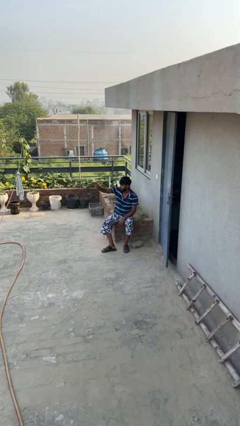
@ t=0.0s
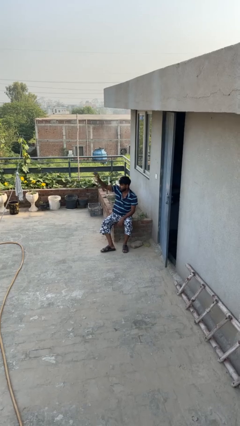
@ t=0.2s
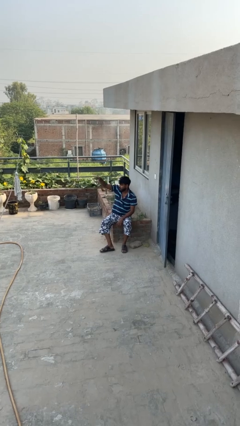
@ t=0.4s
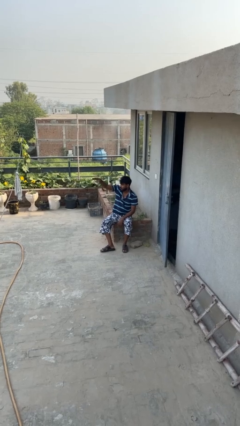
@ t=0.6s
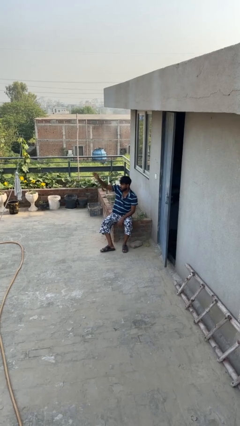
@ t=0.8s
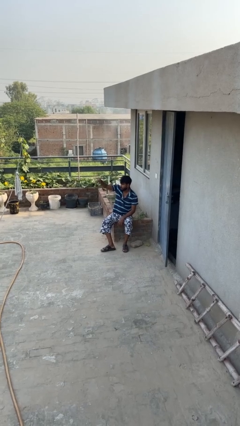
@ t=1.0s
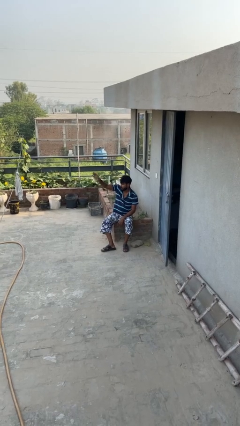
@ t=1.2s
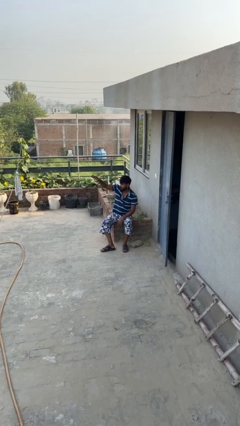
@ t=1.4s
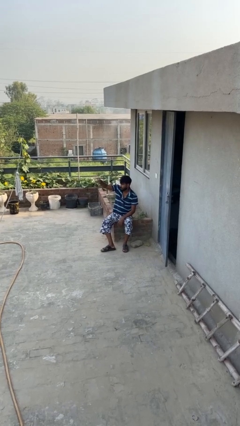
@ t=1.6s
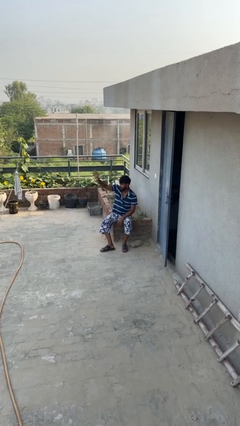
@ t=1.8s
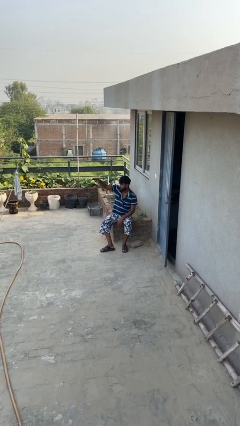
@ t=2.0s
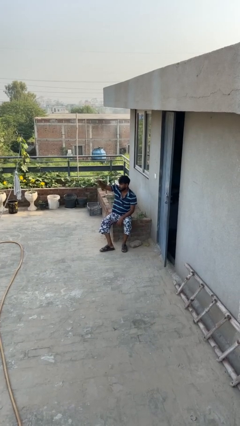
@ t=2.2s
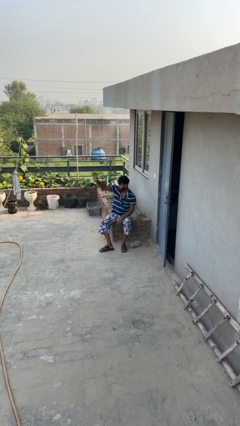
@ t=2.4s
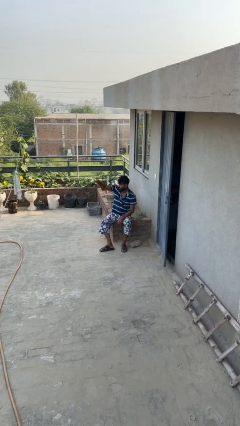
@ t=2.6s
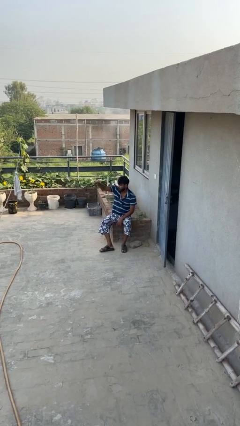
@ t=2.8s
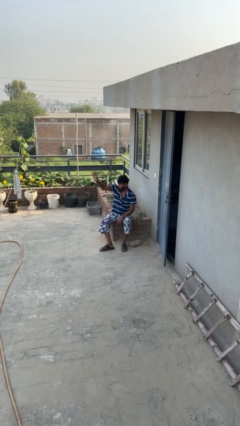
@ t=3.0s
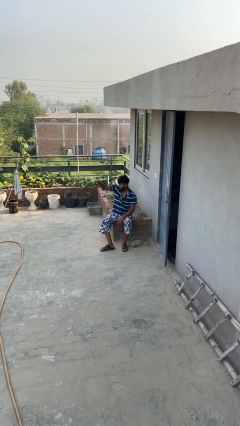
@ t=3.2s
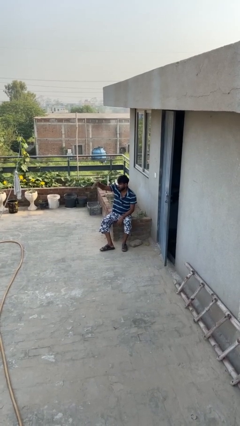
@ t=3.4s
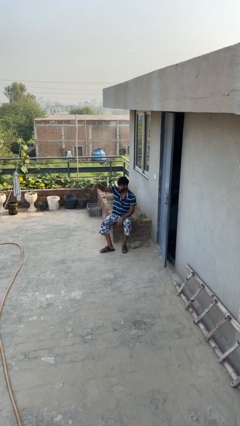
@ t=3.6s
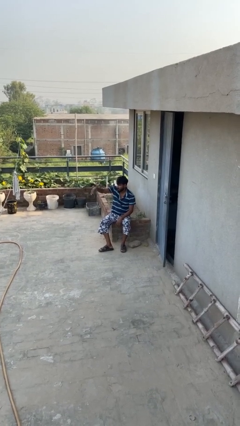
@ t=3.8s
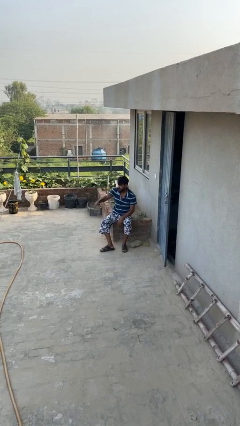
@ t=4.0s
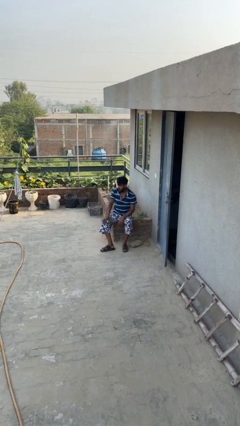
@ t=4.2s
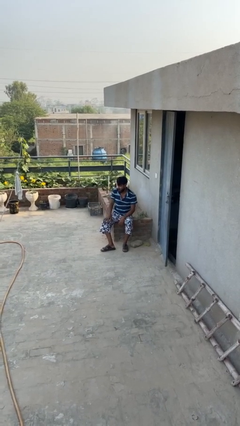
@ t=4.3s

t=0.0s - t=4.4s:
person gestures come here

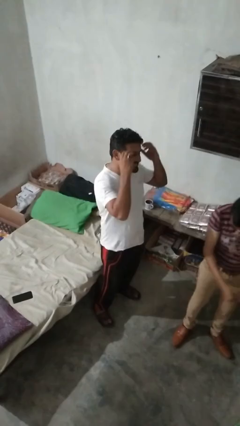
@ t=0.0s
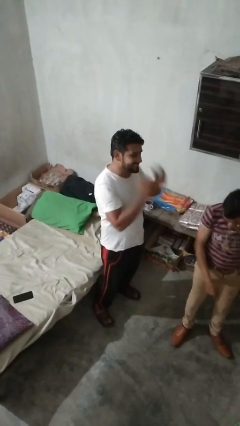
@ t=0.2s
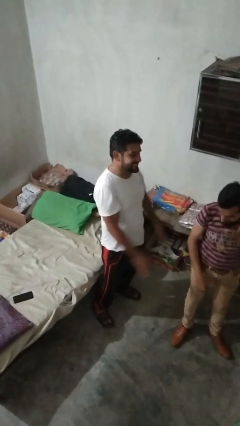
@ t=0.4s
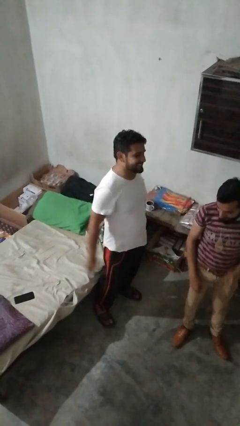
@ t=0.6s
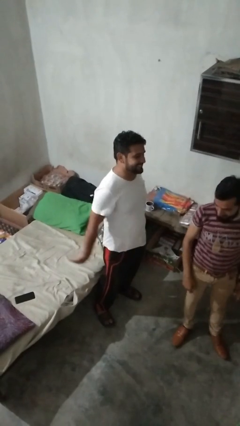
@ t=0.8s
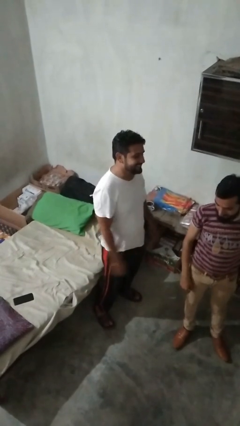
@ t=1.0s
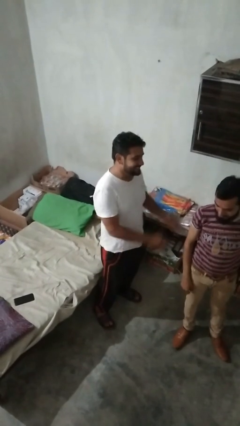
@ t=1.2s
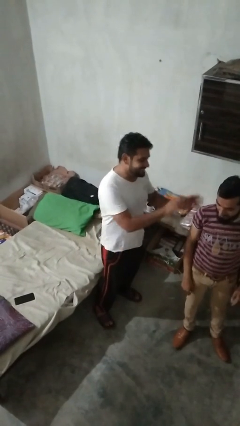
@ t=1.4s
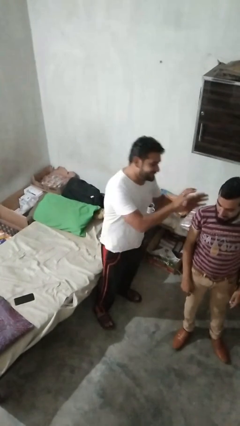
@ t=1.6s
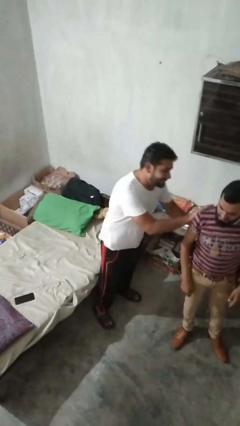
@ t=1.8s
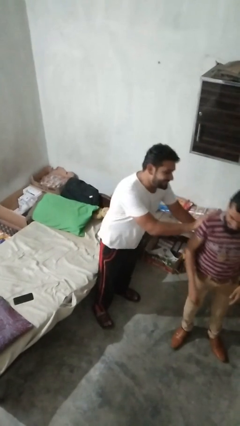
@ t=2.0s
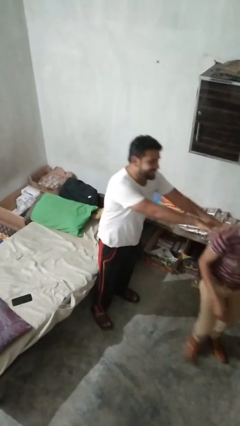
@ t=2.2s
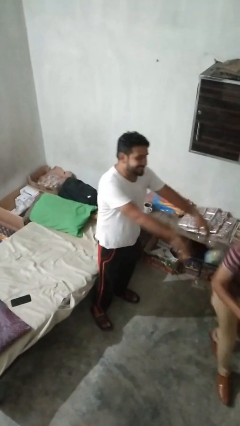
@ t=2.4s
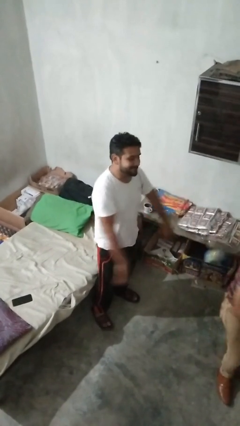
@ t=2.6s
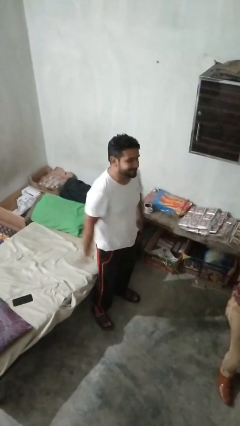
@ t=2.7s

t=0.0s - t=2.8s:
person shoves person

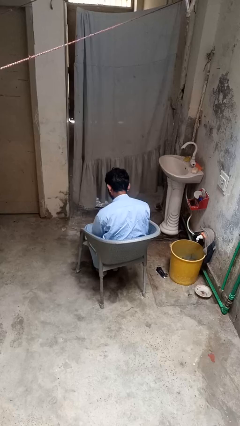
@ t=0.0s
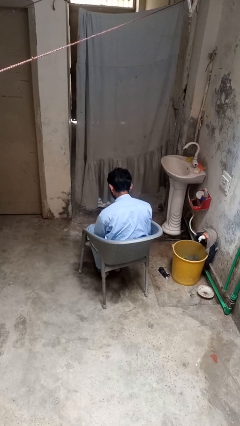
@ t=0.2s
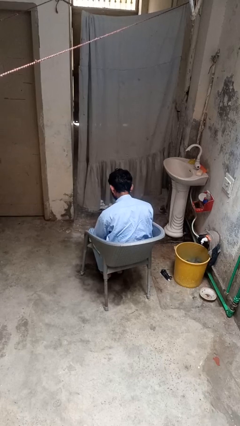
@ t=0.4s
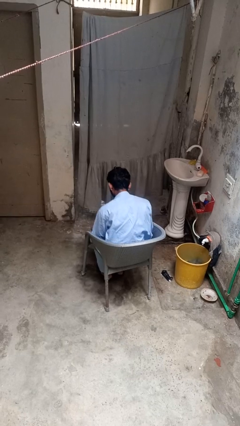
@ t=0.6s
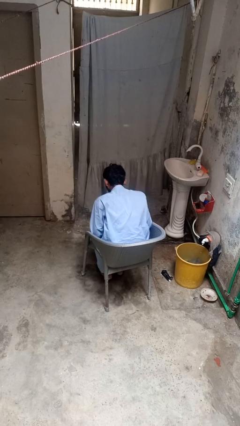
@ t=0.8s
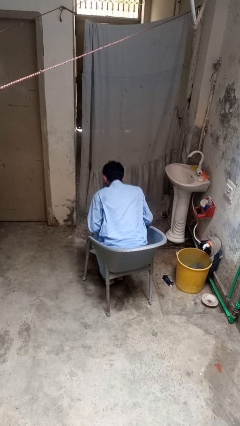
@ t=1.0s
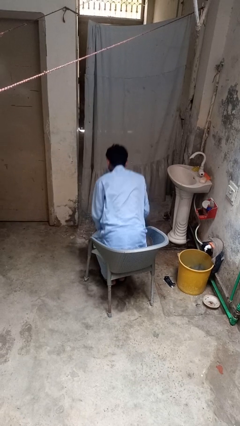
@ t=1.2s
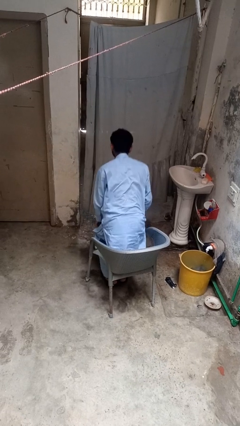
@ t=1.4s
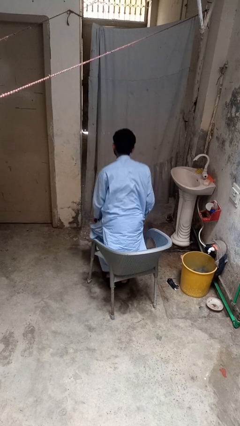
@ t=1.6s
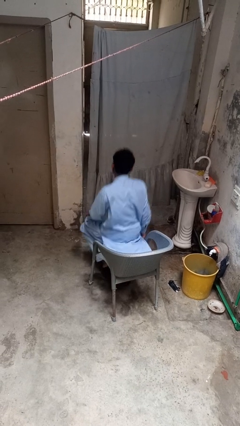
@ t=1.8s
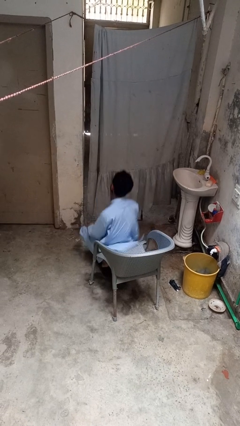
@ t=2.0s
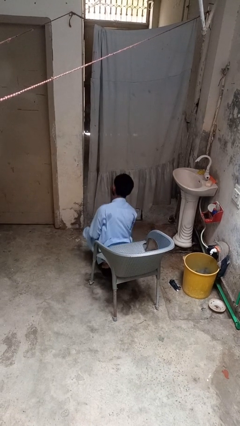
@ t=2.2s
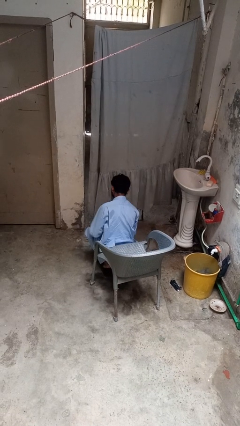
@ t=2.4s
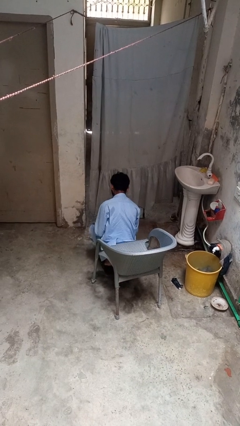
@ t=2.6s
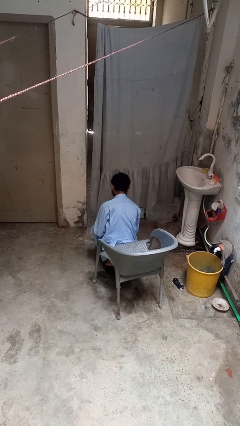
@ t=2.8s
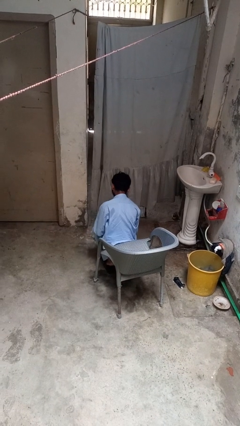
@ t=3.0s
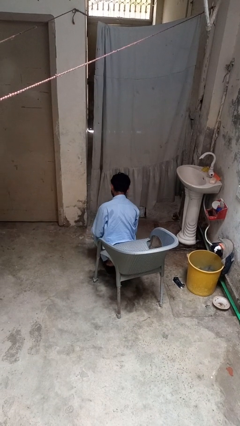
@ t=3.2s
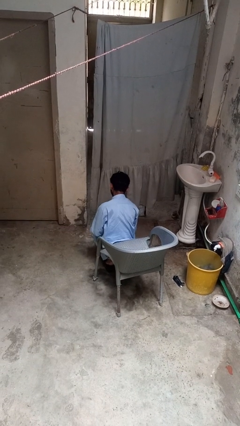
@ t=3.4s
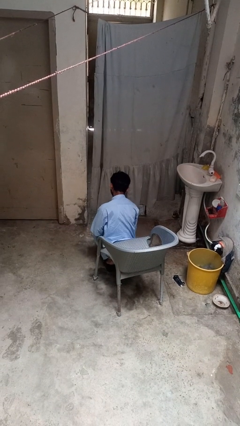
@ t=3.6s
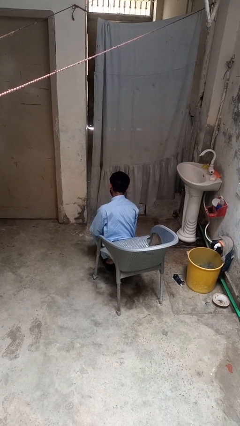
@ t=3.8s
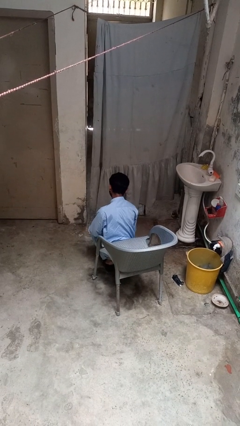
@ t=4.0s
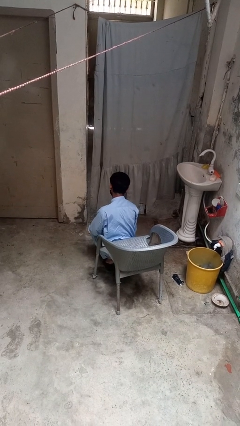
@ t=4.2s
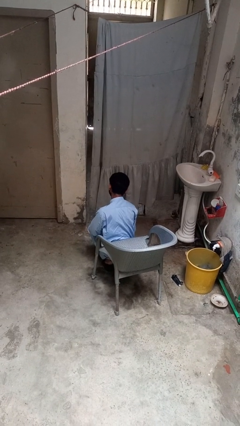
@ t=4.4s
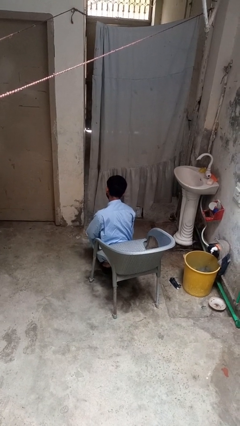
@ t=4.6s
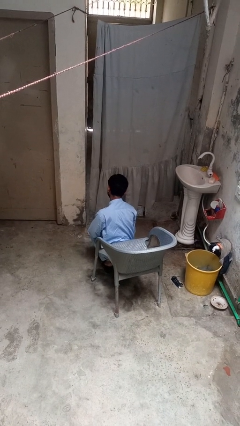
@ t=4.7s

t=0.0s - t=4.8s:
person falls from chair

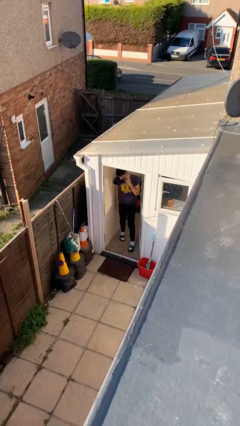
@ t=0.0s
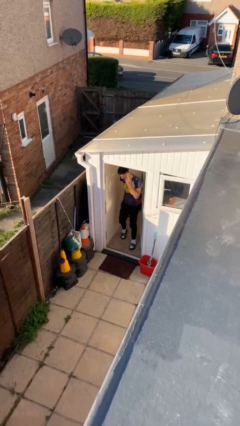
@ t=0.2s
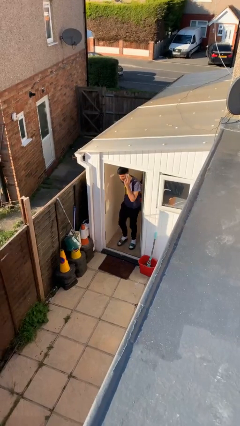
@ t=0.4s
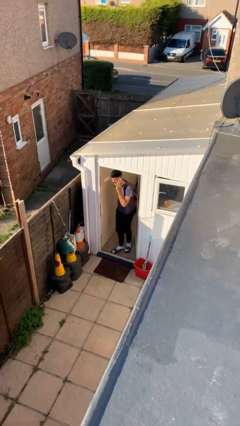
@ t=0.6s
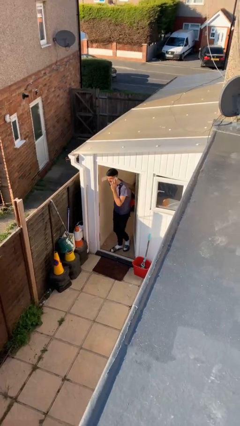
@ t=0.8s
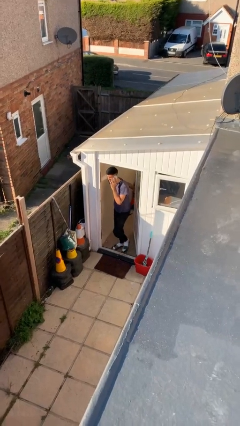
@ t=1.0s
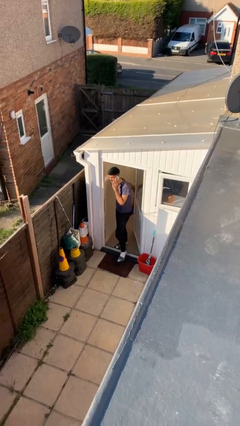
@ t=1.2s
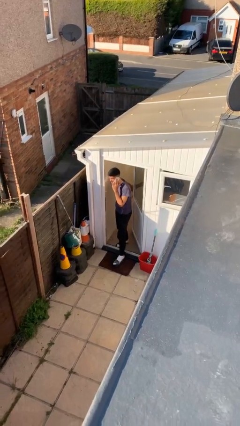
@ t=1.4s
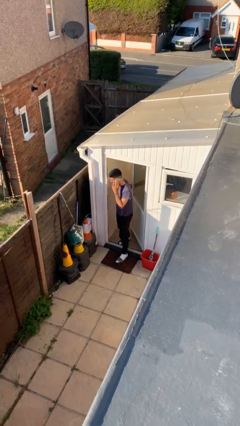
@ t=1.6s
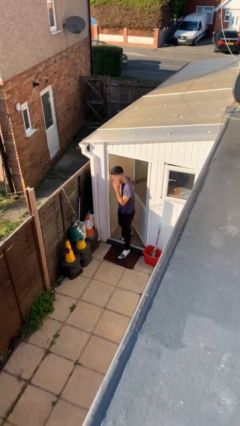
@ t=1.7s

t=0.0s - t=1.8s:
person enters scene through structure

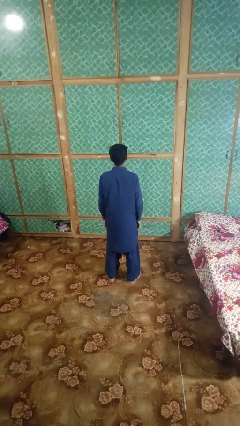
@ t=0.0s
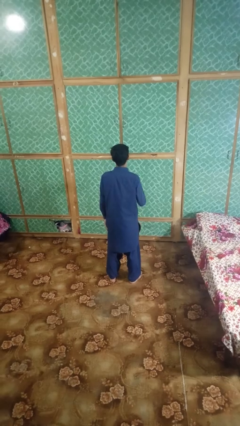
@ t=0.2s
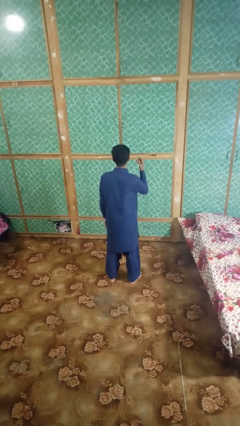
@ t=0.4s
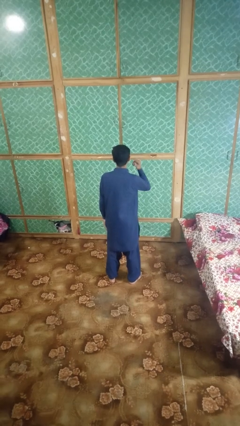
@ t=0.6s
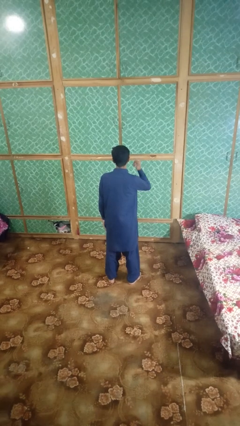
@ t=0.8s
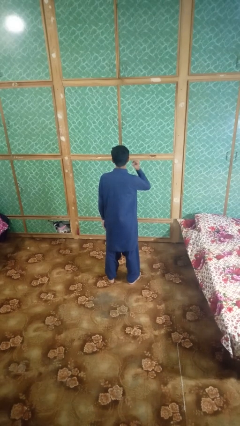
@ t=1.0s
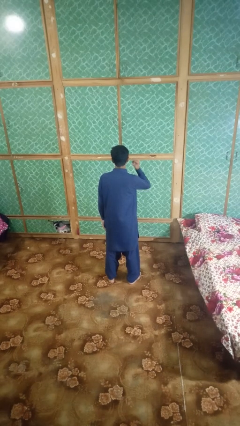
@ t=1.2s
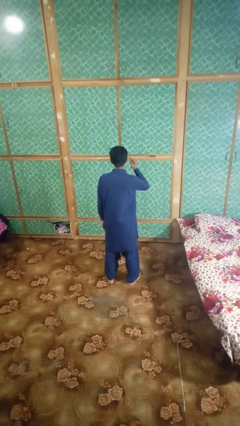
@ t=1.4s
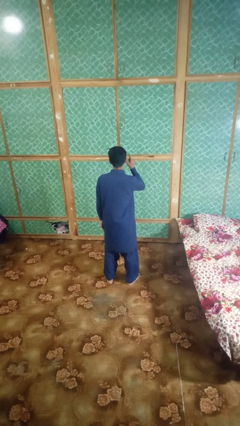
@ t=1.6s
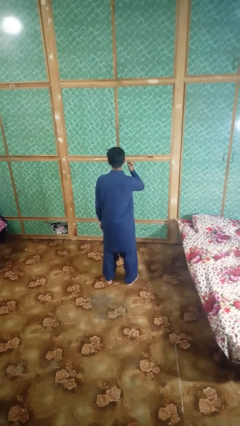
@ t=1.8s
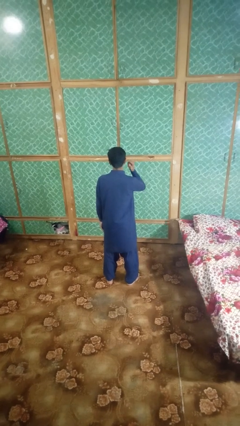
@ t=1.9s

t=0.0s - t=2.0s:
person gestures listen closely

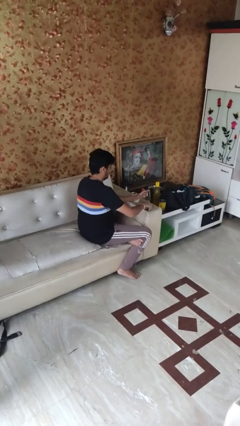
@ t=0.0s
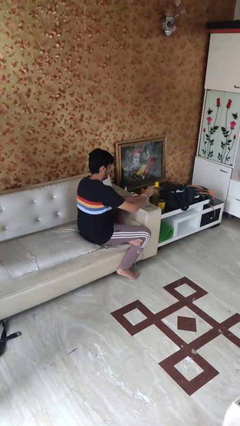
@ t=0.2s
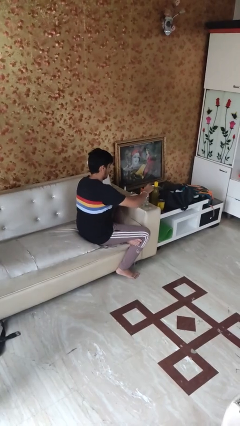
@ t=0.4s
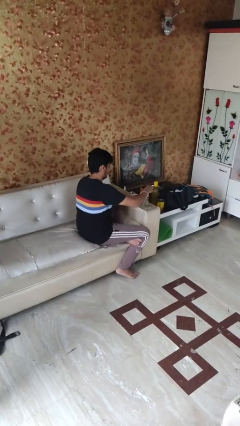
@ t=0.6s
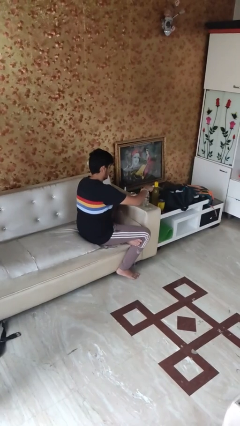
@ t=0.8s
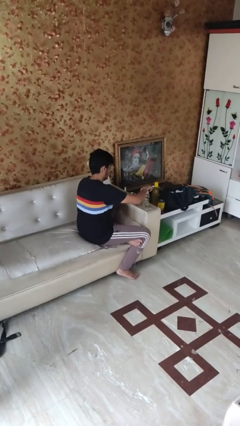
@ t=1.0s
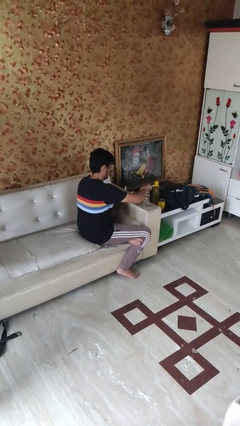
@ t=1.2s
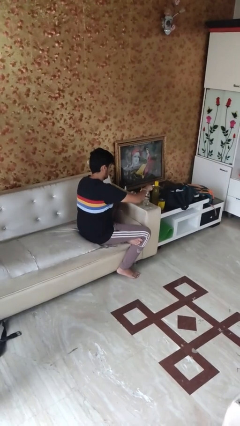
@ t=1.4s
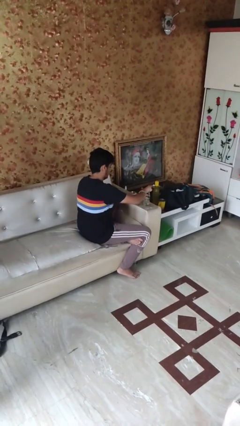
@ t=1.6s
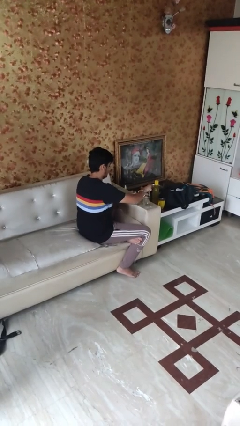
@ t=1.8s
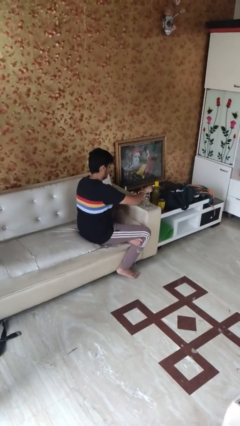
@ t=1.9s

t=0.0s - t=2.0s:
person screws lid to bottle
